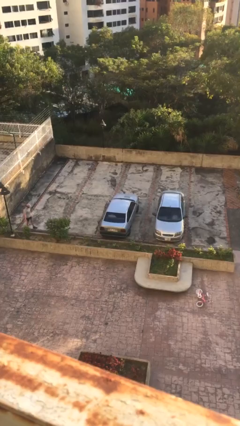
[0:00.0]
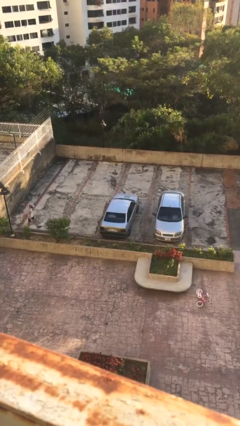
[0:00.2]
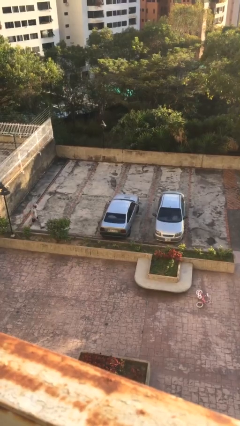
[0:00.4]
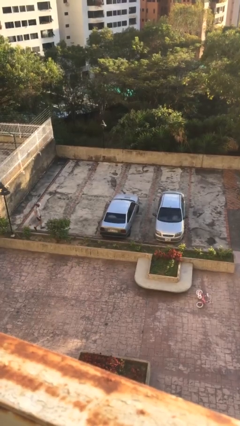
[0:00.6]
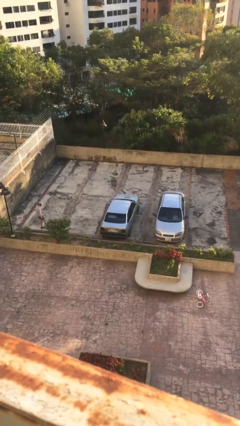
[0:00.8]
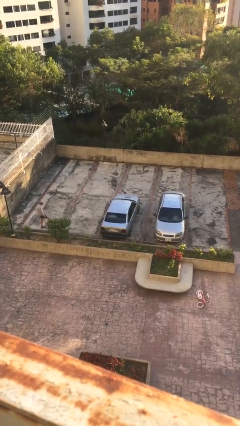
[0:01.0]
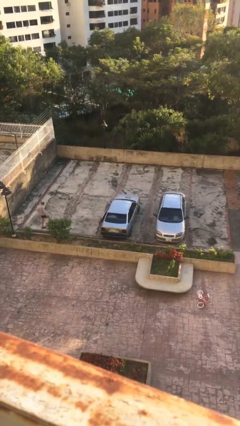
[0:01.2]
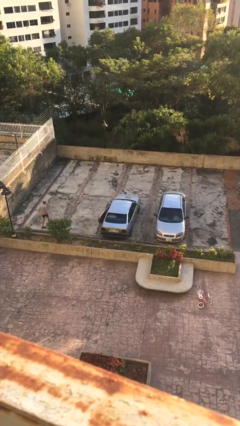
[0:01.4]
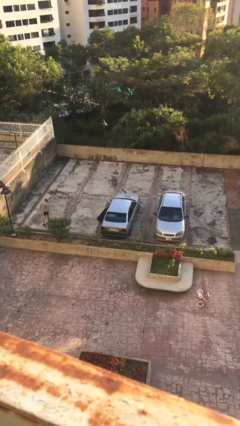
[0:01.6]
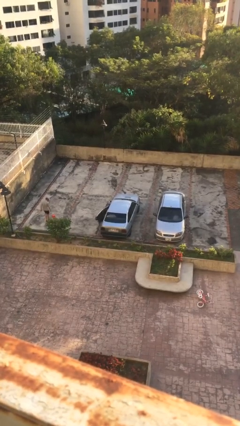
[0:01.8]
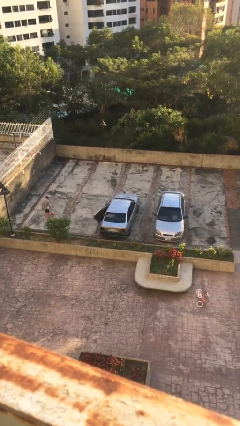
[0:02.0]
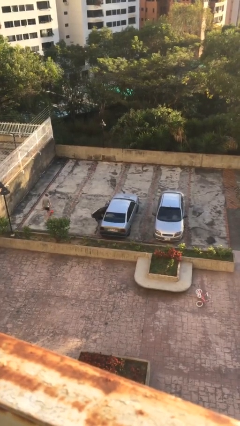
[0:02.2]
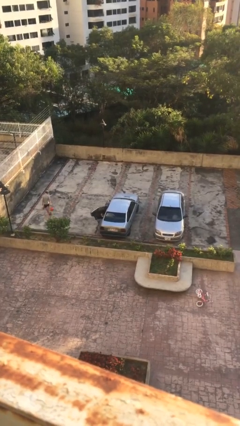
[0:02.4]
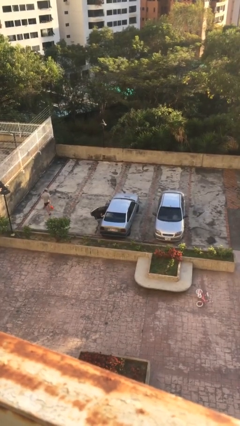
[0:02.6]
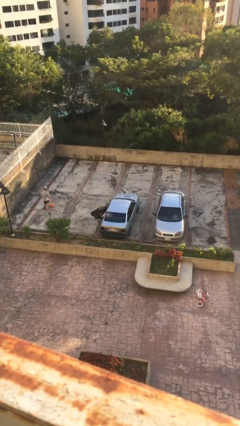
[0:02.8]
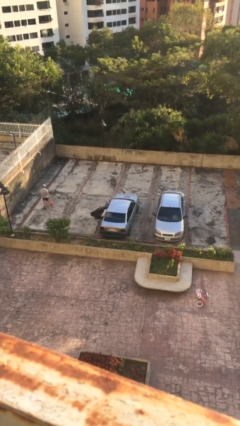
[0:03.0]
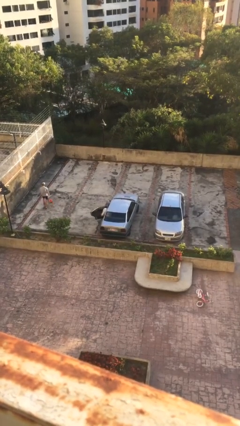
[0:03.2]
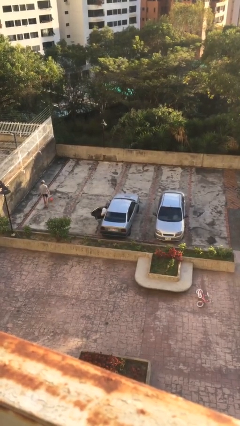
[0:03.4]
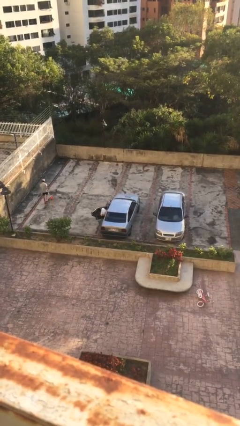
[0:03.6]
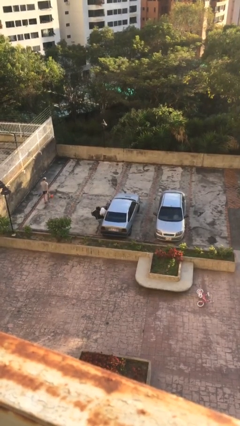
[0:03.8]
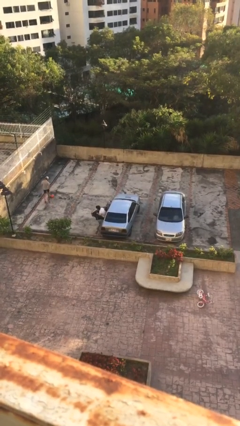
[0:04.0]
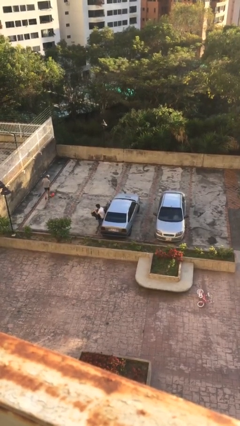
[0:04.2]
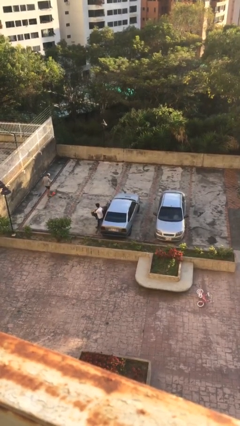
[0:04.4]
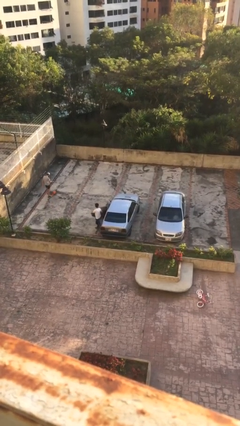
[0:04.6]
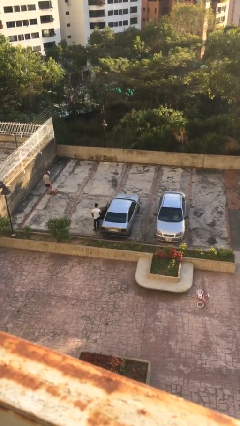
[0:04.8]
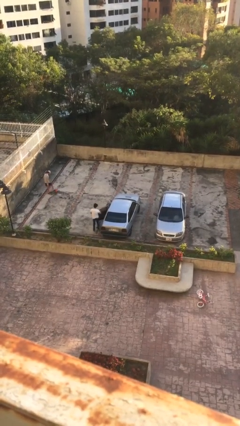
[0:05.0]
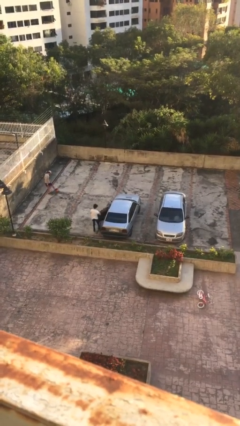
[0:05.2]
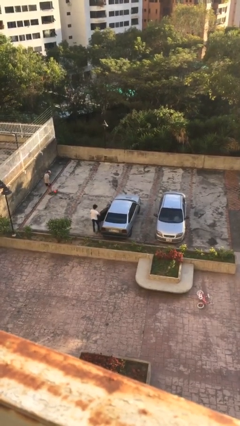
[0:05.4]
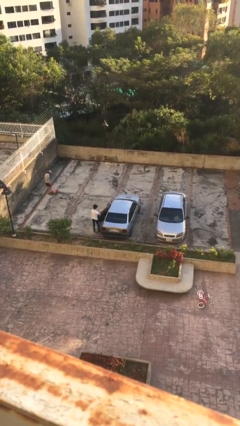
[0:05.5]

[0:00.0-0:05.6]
car drops off person

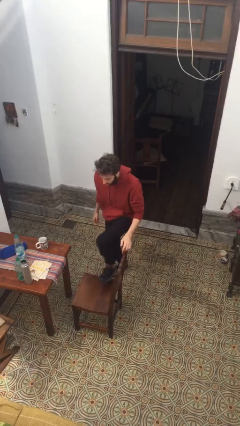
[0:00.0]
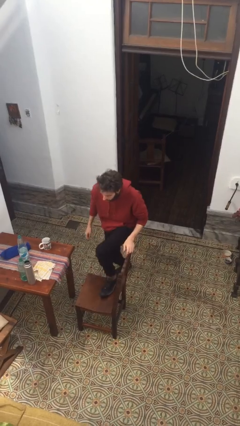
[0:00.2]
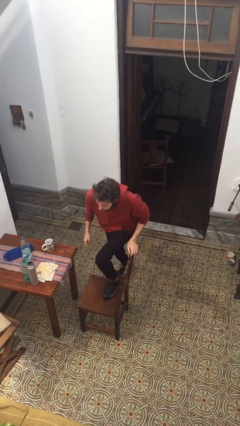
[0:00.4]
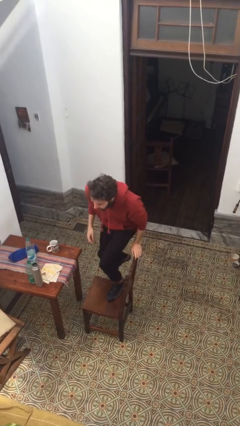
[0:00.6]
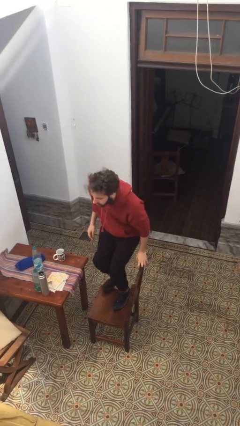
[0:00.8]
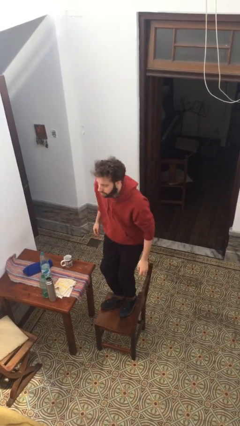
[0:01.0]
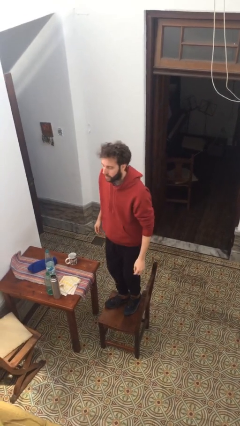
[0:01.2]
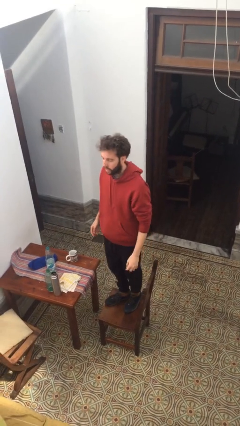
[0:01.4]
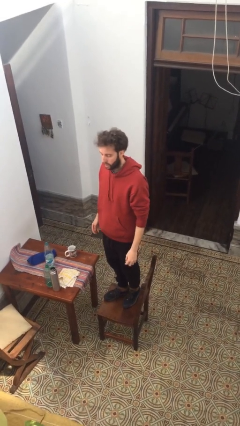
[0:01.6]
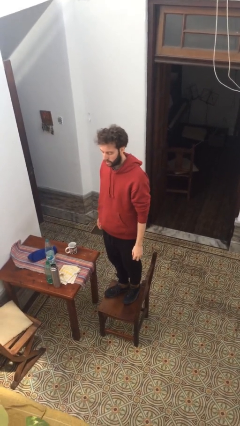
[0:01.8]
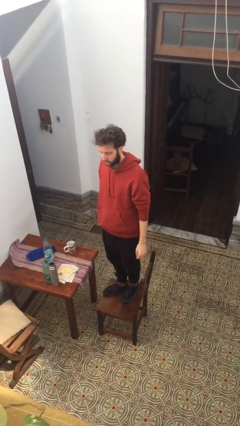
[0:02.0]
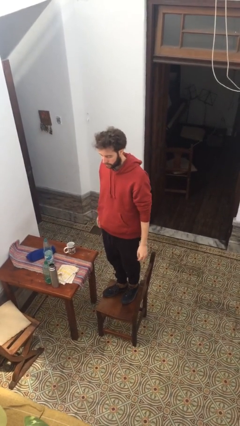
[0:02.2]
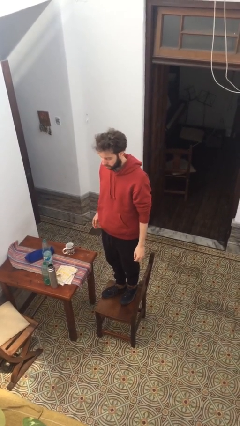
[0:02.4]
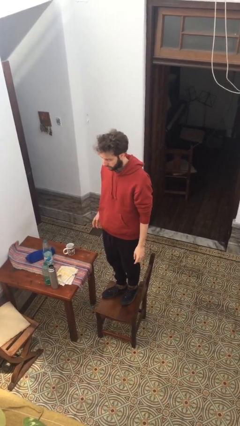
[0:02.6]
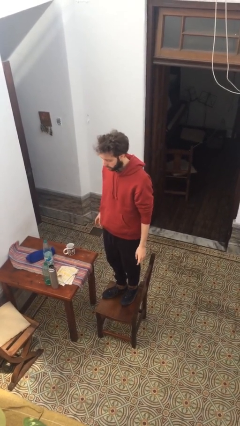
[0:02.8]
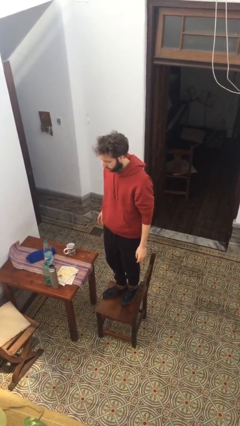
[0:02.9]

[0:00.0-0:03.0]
person climbs on chair

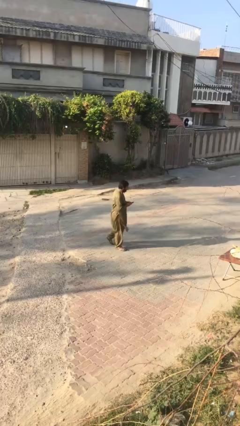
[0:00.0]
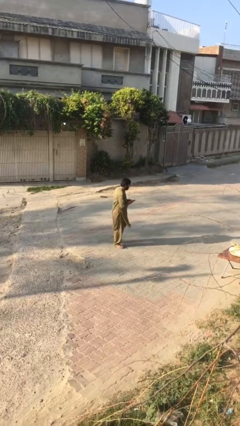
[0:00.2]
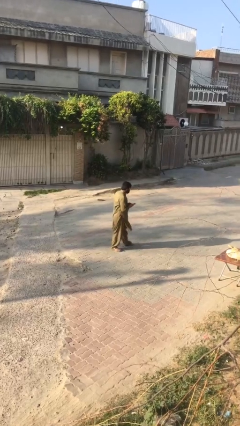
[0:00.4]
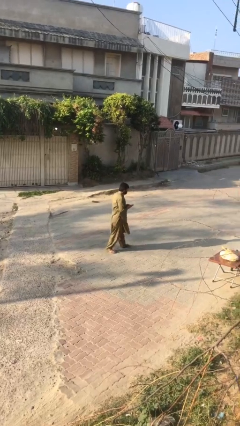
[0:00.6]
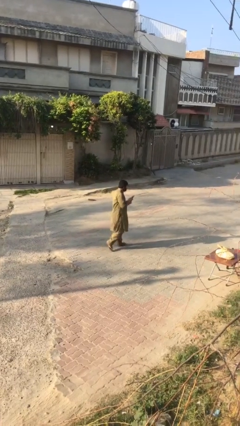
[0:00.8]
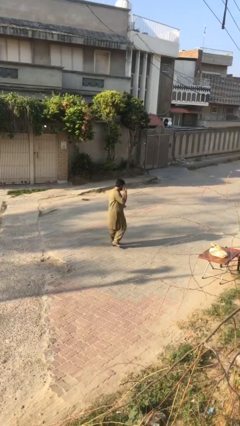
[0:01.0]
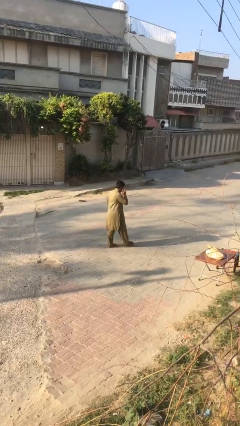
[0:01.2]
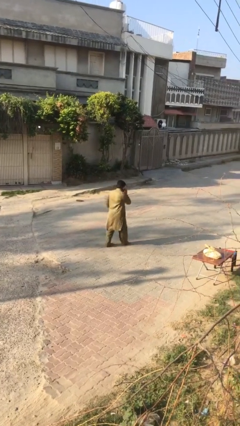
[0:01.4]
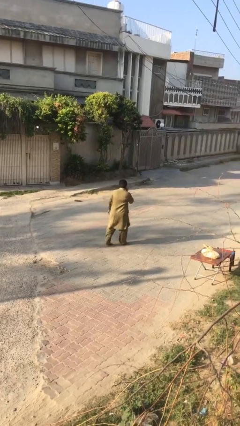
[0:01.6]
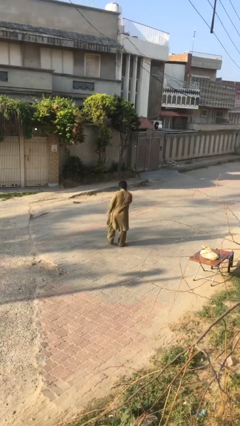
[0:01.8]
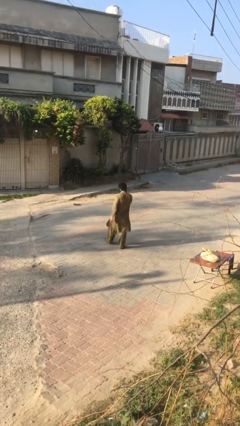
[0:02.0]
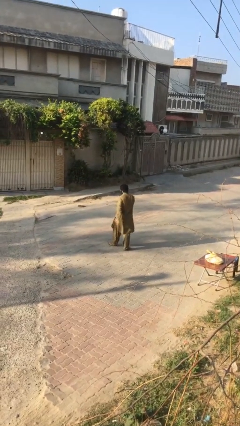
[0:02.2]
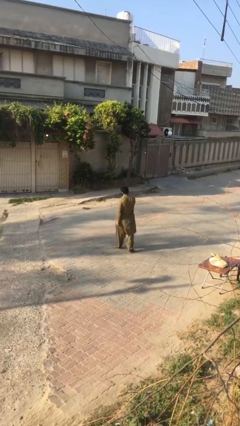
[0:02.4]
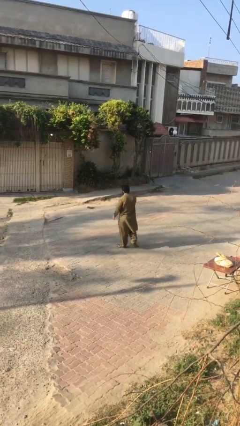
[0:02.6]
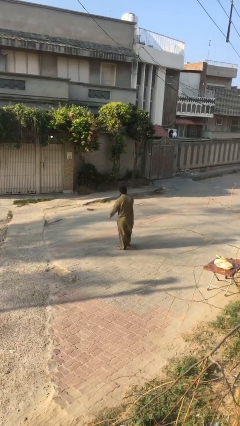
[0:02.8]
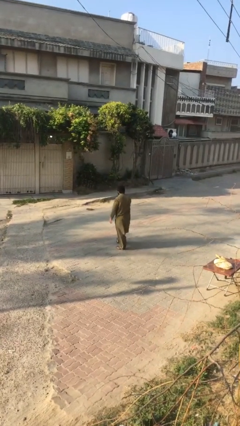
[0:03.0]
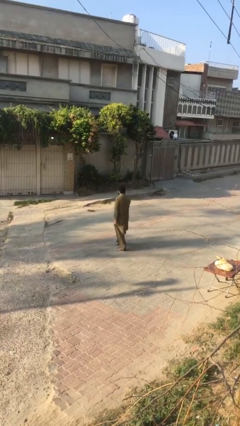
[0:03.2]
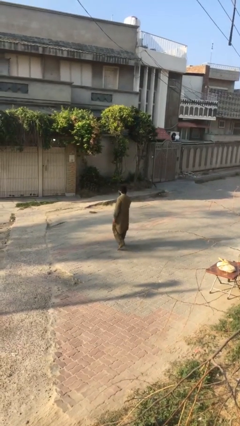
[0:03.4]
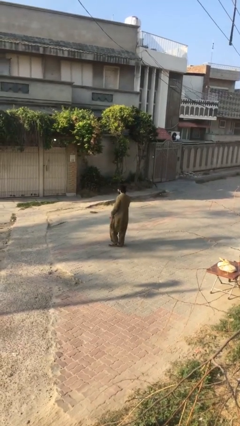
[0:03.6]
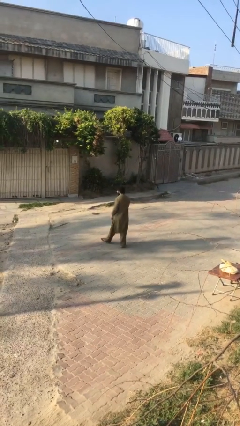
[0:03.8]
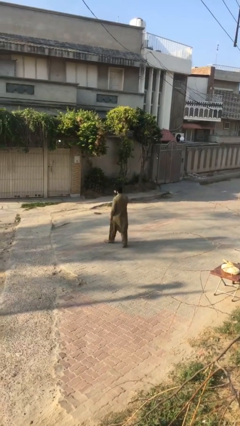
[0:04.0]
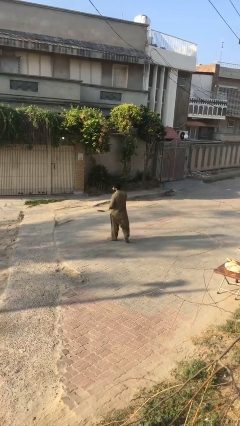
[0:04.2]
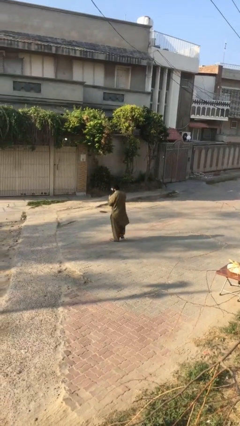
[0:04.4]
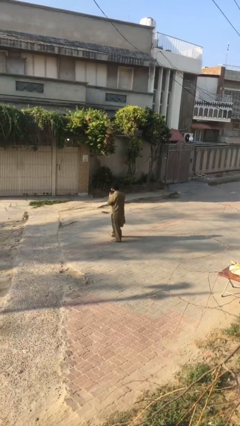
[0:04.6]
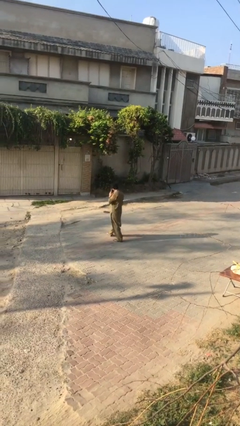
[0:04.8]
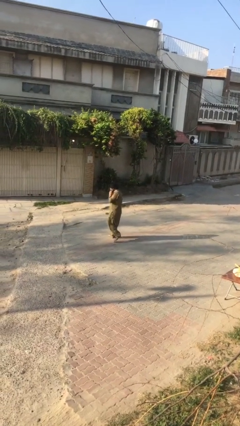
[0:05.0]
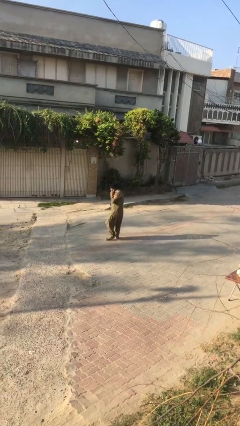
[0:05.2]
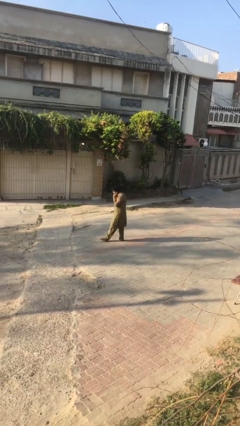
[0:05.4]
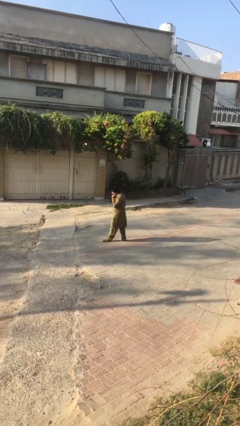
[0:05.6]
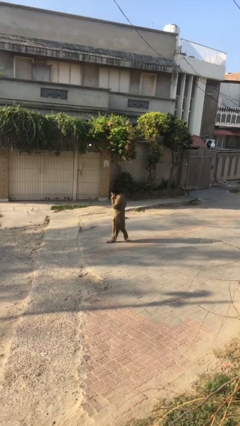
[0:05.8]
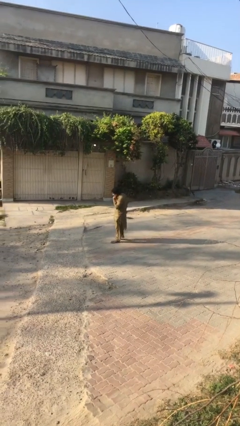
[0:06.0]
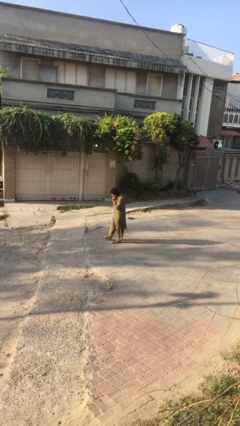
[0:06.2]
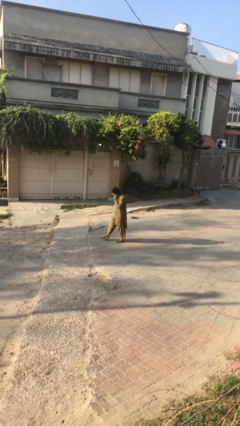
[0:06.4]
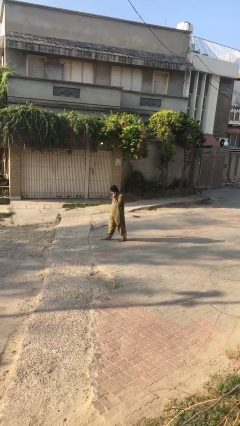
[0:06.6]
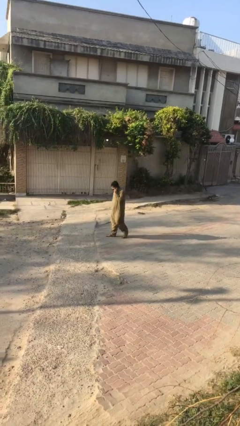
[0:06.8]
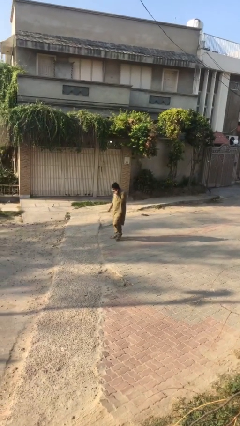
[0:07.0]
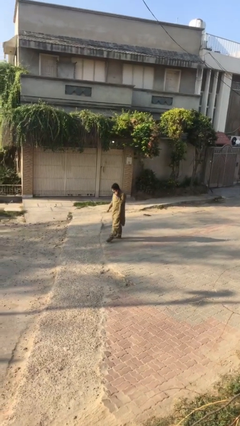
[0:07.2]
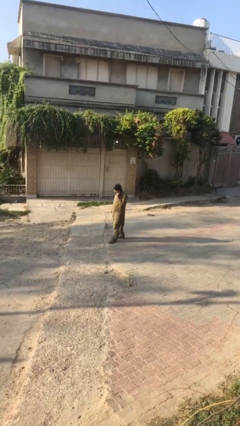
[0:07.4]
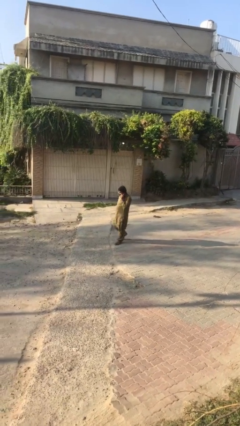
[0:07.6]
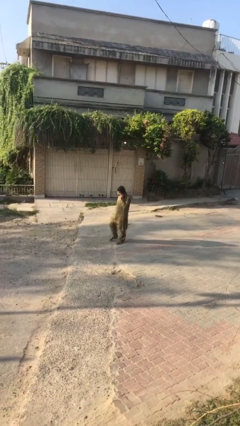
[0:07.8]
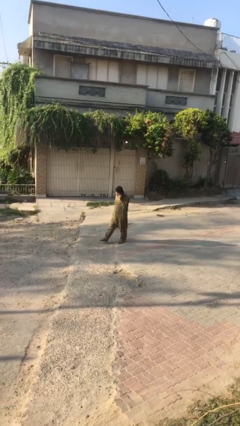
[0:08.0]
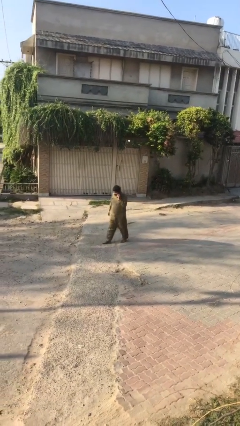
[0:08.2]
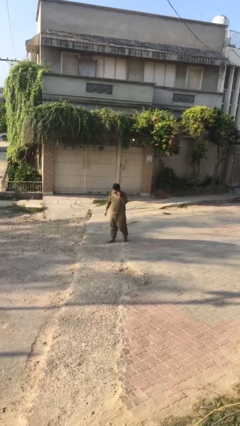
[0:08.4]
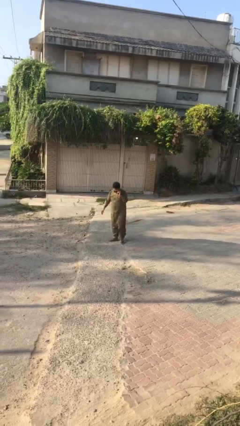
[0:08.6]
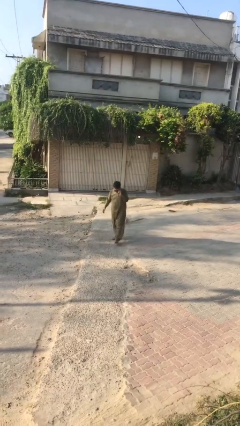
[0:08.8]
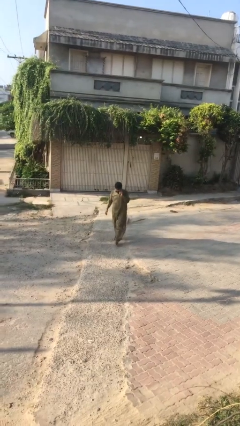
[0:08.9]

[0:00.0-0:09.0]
person talks on phone

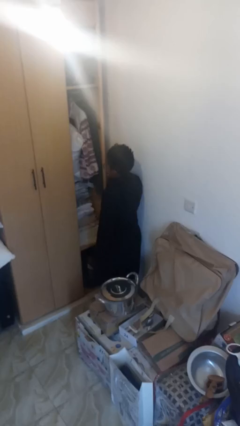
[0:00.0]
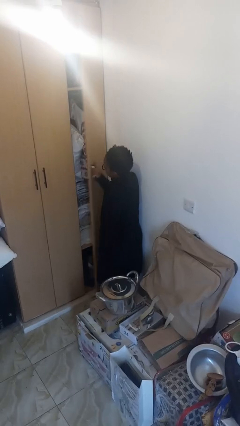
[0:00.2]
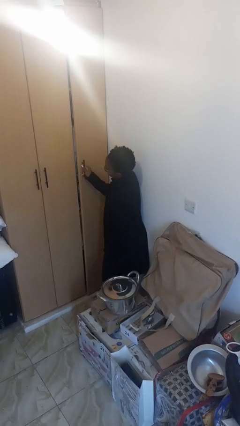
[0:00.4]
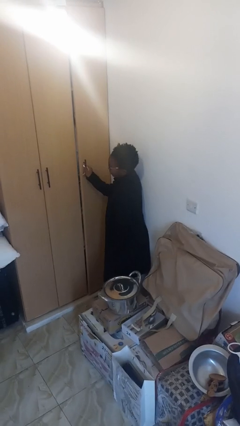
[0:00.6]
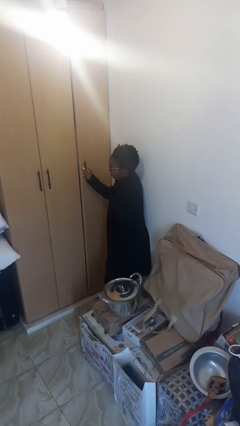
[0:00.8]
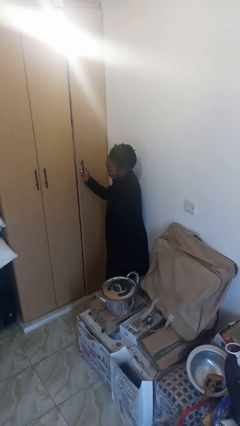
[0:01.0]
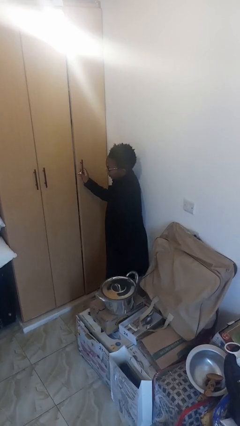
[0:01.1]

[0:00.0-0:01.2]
person closes closet door
